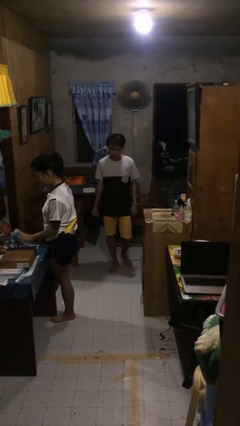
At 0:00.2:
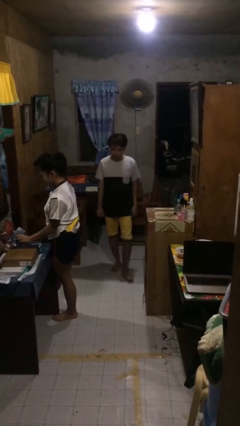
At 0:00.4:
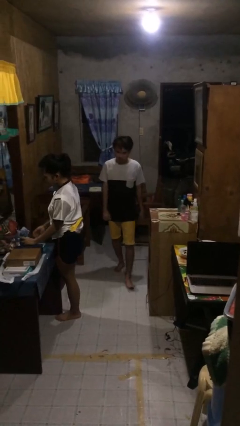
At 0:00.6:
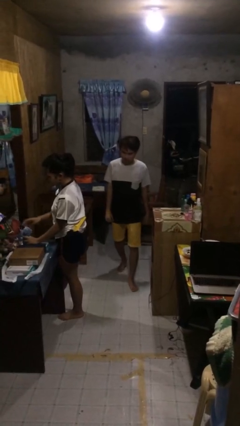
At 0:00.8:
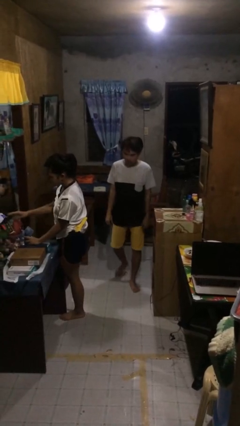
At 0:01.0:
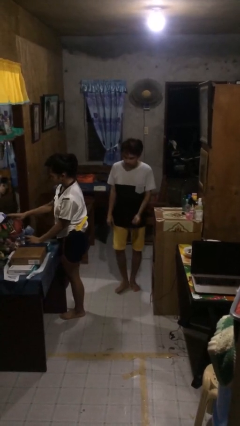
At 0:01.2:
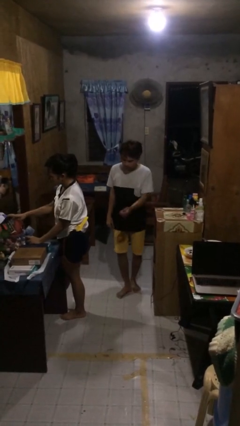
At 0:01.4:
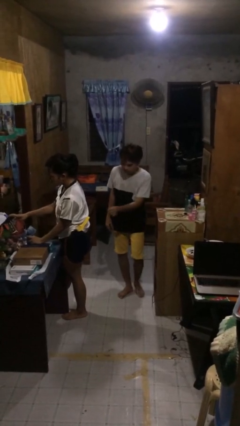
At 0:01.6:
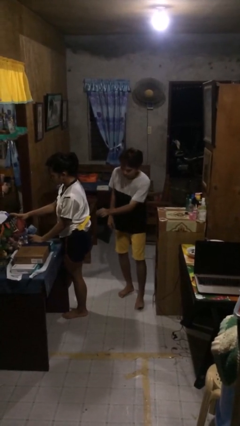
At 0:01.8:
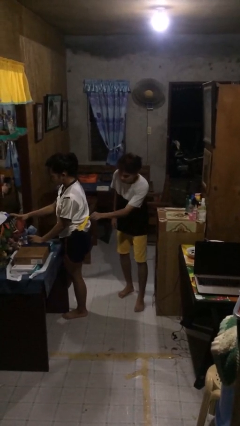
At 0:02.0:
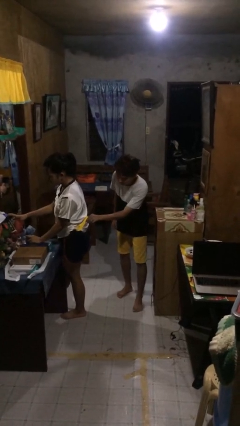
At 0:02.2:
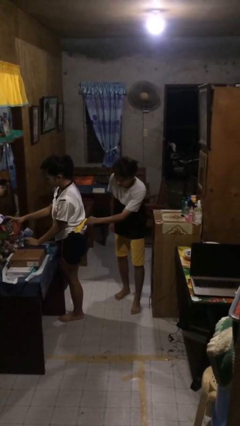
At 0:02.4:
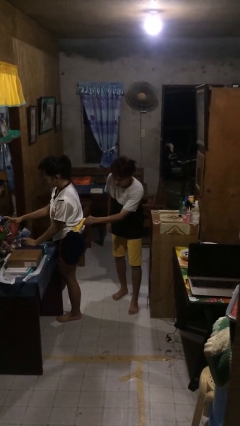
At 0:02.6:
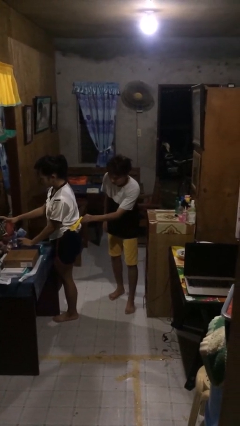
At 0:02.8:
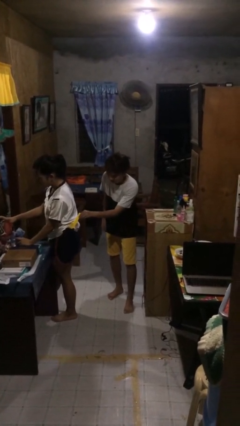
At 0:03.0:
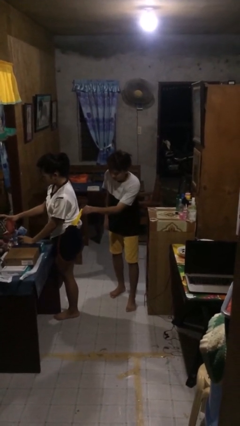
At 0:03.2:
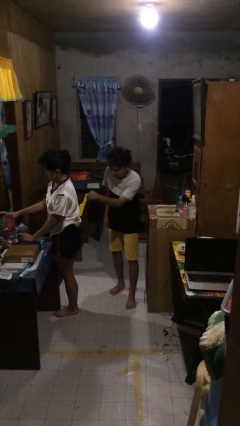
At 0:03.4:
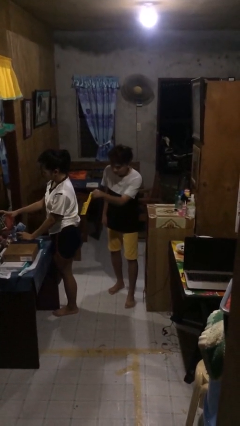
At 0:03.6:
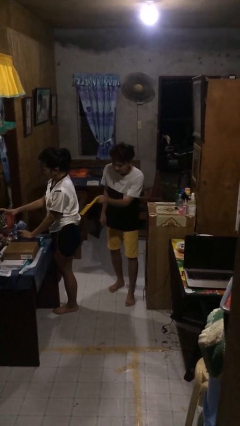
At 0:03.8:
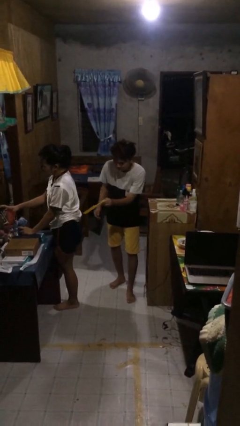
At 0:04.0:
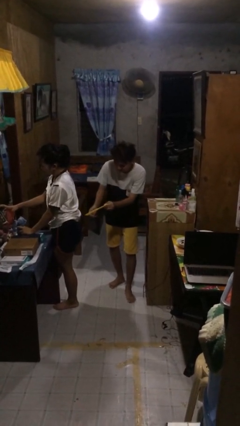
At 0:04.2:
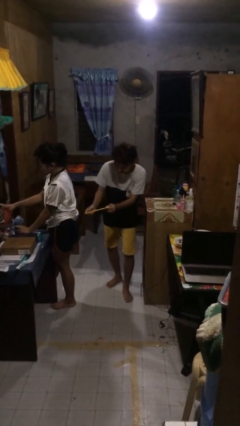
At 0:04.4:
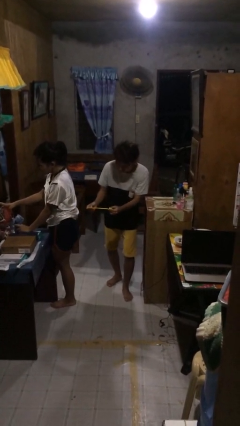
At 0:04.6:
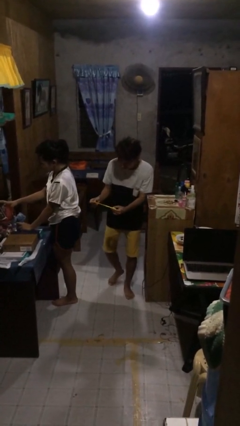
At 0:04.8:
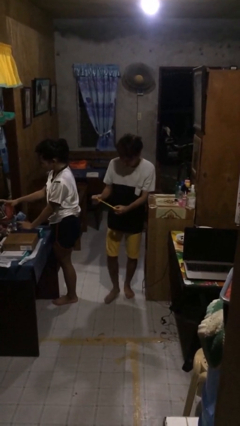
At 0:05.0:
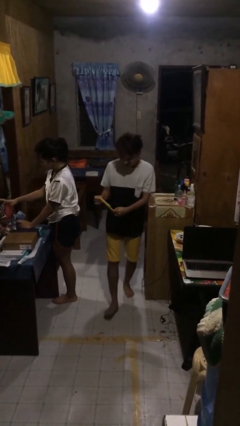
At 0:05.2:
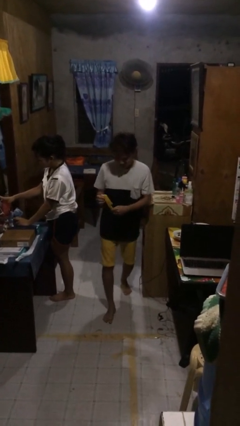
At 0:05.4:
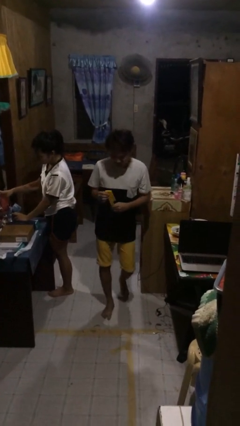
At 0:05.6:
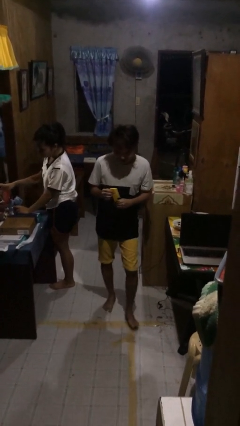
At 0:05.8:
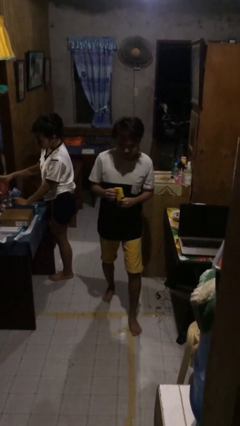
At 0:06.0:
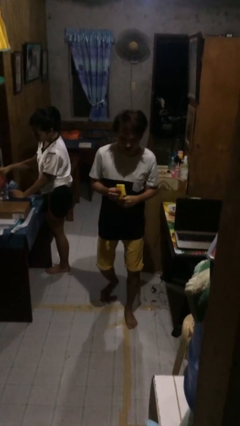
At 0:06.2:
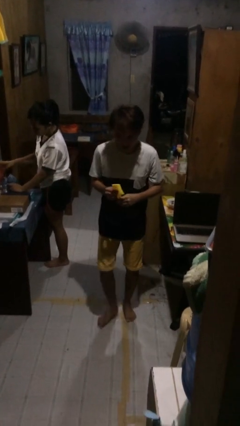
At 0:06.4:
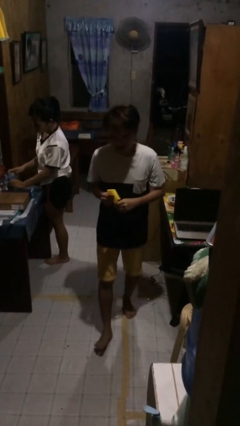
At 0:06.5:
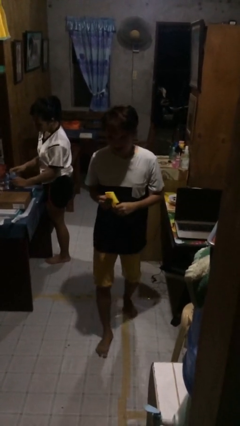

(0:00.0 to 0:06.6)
person steals object from person

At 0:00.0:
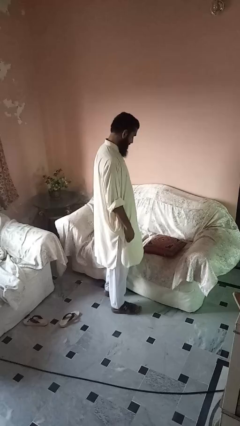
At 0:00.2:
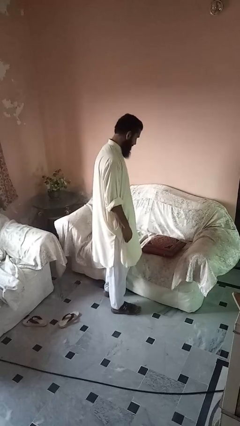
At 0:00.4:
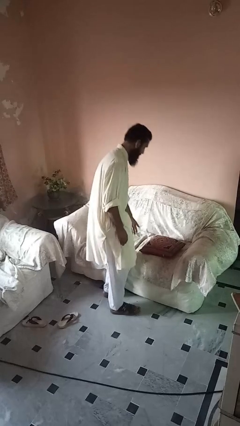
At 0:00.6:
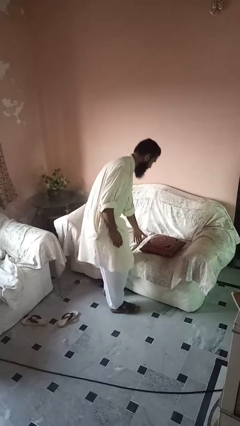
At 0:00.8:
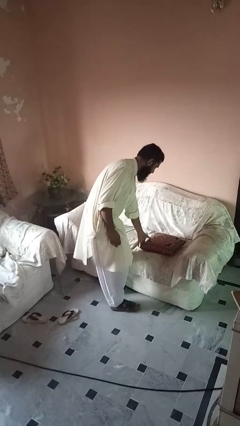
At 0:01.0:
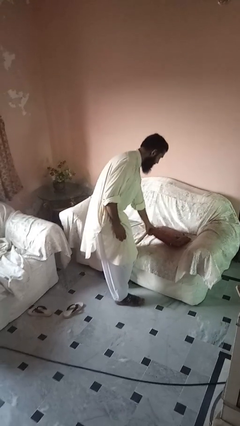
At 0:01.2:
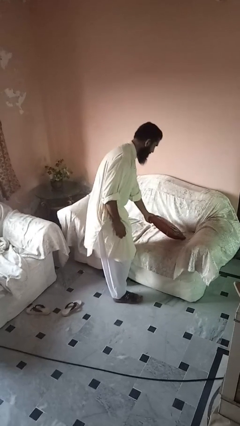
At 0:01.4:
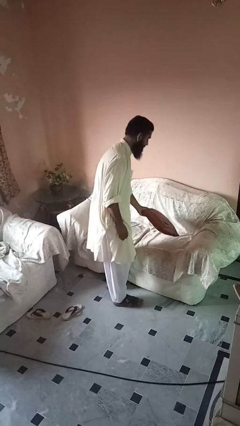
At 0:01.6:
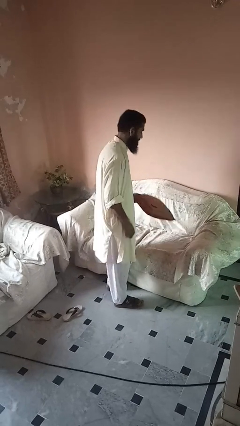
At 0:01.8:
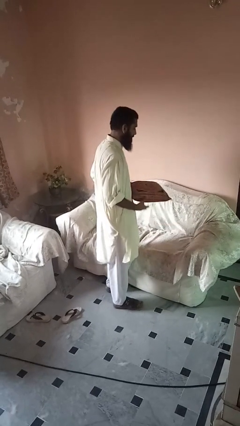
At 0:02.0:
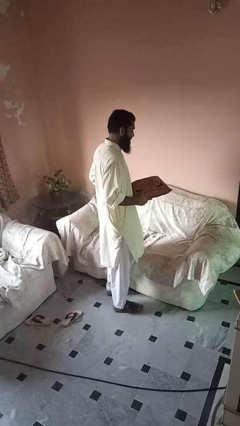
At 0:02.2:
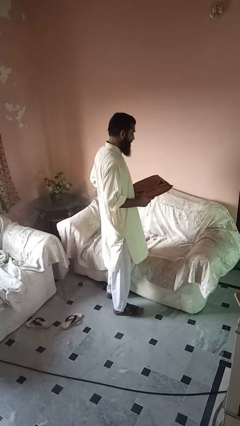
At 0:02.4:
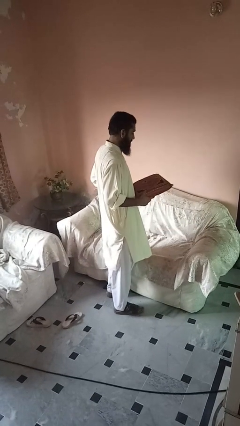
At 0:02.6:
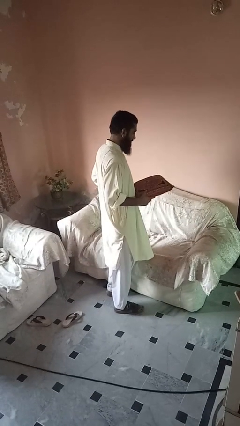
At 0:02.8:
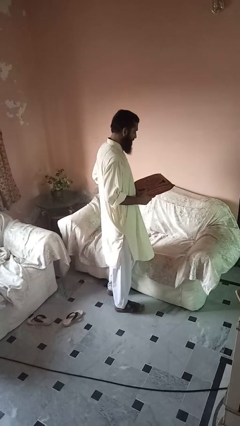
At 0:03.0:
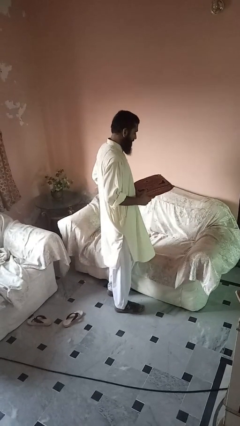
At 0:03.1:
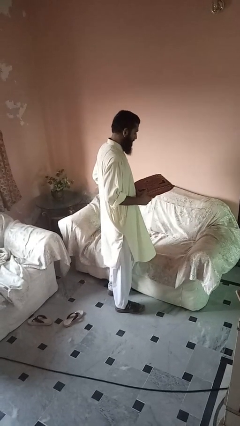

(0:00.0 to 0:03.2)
person picks up object from couch

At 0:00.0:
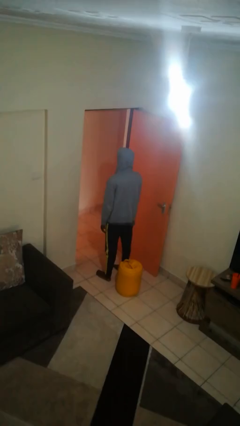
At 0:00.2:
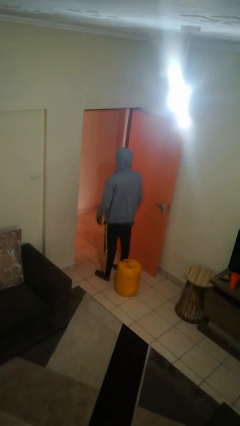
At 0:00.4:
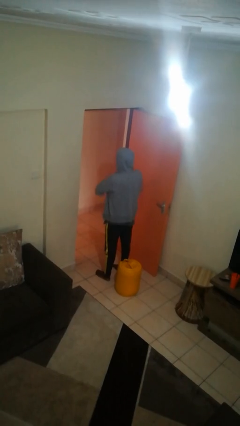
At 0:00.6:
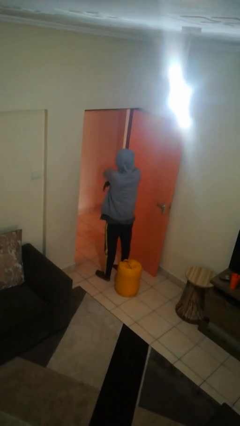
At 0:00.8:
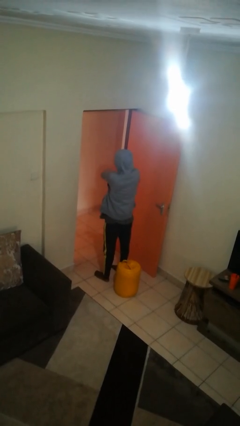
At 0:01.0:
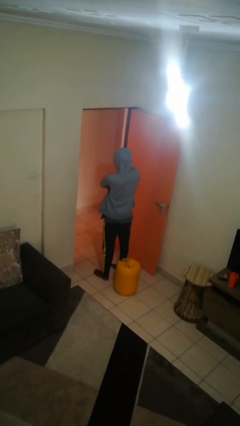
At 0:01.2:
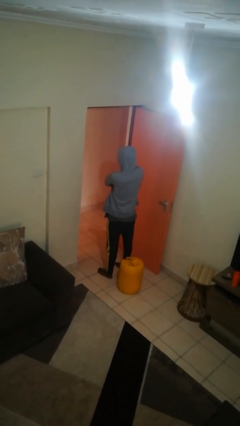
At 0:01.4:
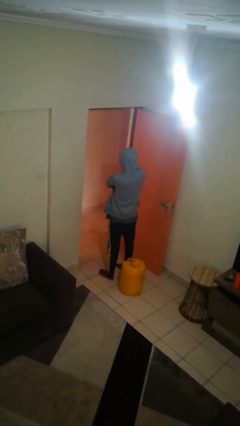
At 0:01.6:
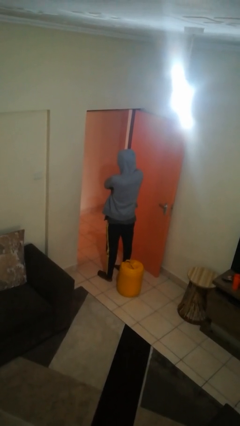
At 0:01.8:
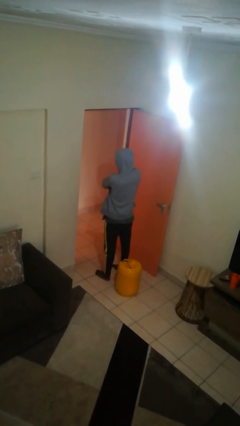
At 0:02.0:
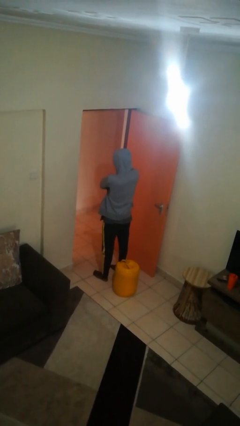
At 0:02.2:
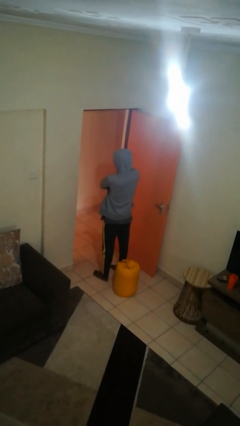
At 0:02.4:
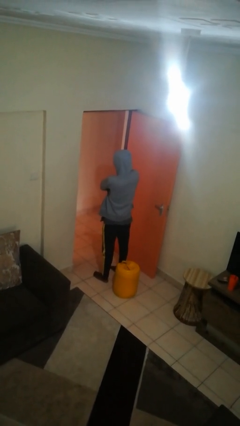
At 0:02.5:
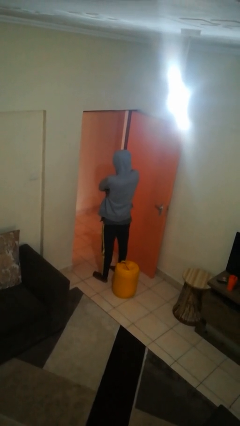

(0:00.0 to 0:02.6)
person crosses arms

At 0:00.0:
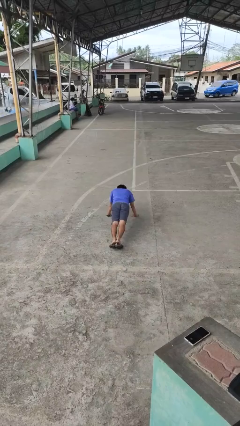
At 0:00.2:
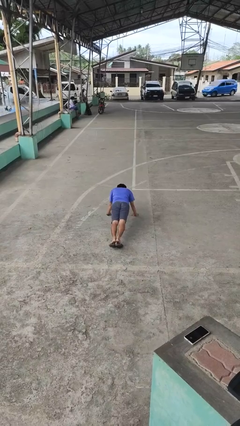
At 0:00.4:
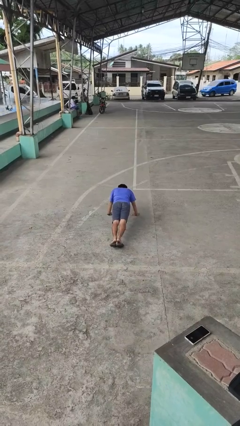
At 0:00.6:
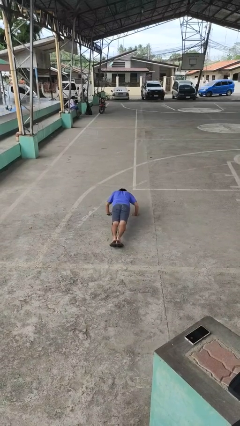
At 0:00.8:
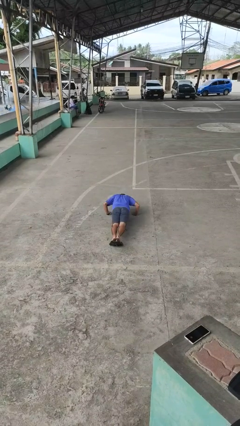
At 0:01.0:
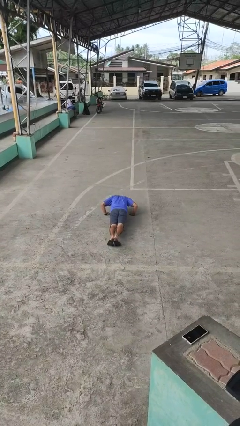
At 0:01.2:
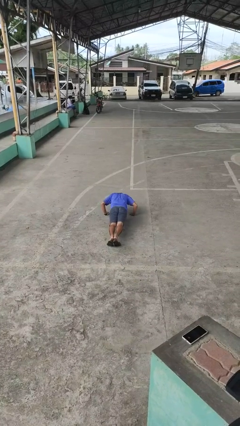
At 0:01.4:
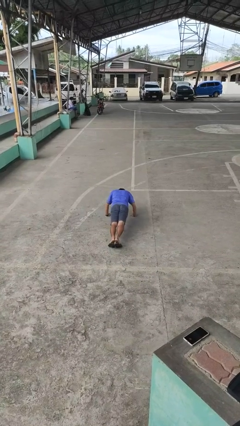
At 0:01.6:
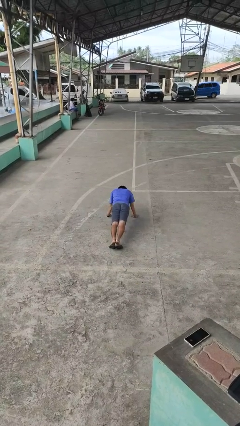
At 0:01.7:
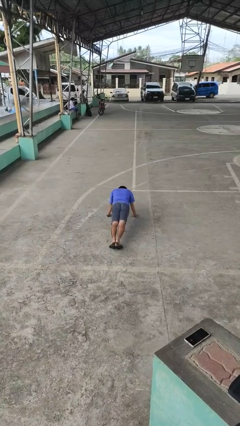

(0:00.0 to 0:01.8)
person exercises with pushup

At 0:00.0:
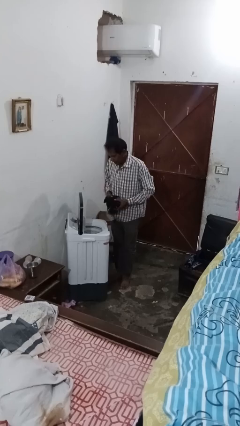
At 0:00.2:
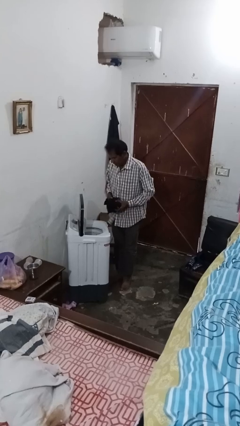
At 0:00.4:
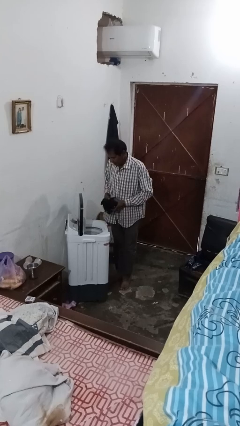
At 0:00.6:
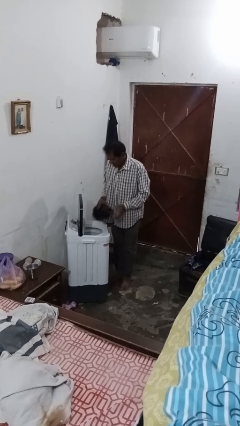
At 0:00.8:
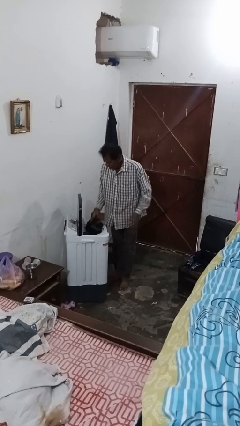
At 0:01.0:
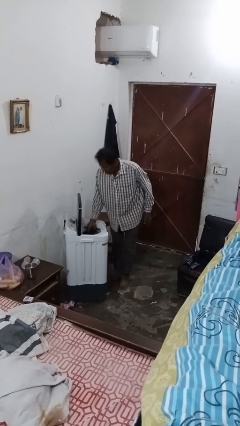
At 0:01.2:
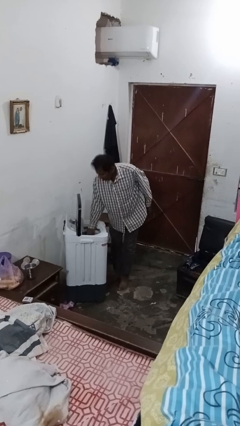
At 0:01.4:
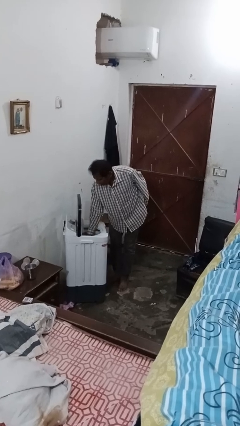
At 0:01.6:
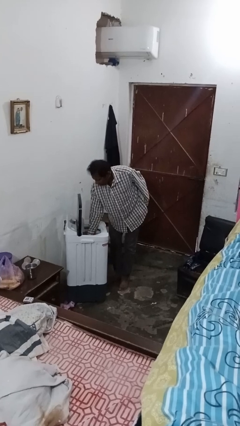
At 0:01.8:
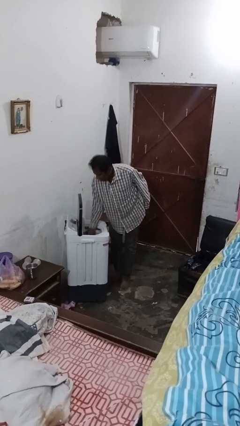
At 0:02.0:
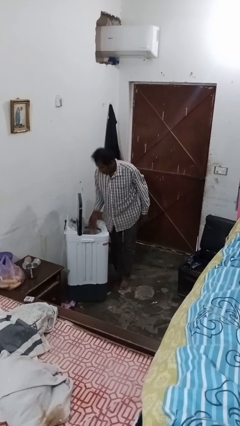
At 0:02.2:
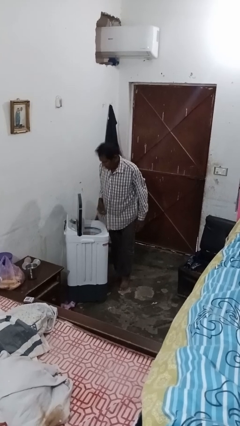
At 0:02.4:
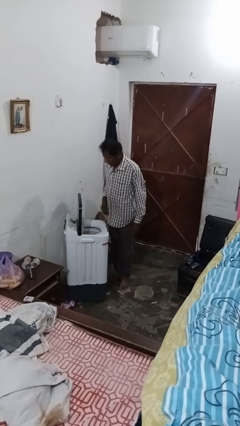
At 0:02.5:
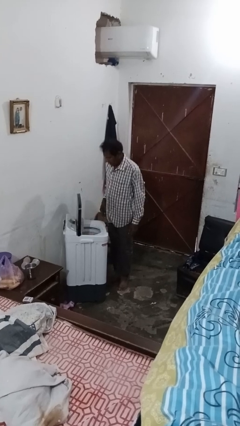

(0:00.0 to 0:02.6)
person loads clotheswasher

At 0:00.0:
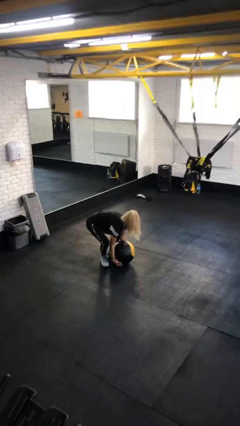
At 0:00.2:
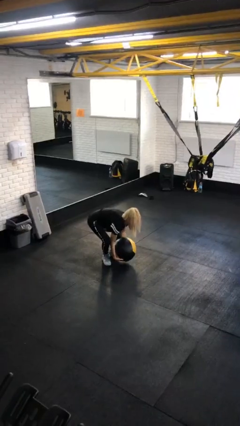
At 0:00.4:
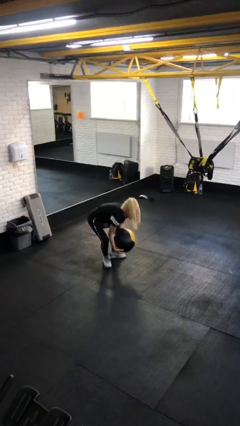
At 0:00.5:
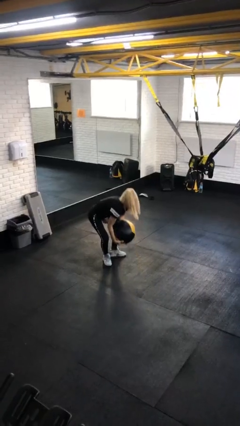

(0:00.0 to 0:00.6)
person picks up object from floor

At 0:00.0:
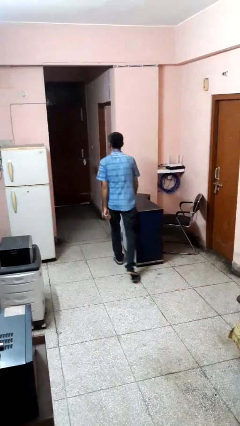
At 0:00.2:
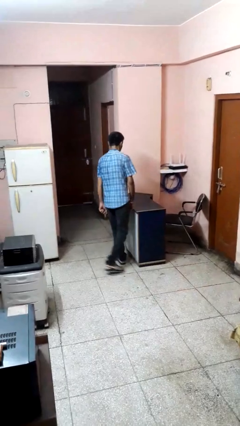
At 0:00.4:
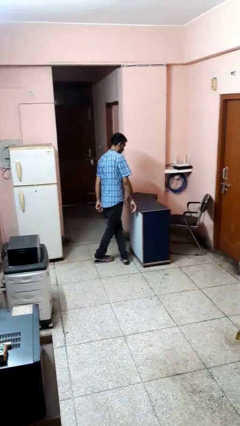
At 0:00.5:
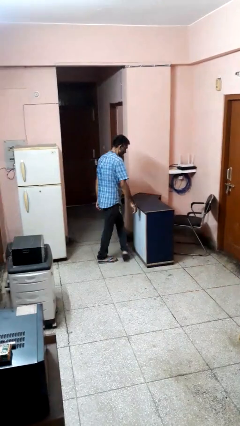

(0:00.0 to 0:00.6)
person bumps into table
